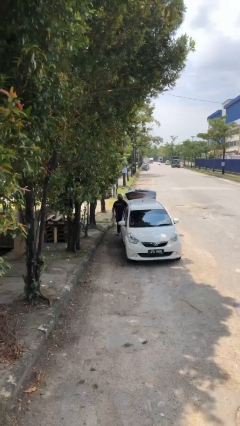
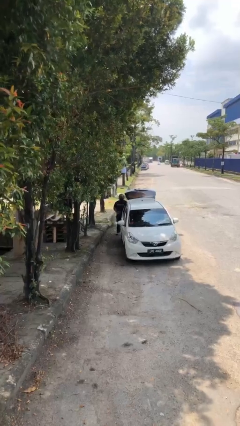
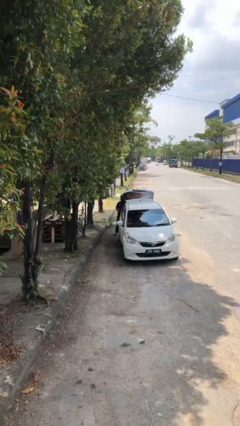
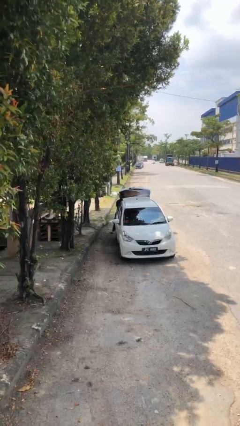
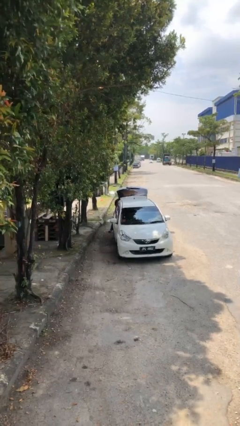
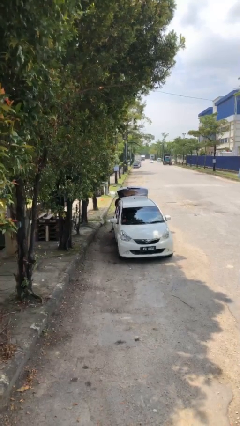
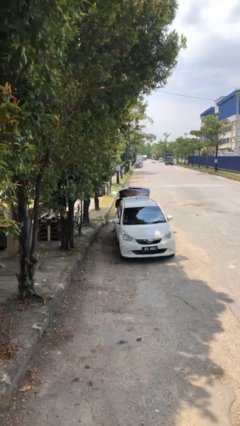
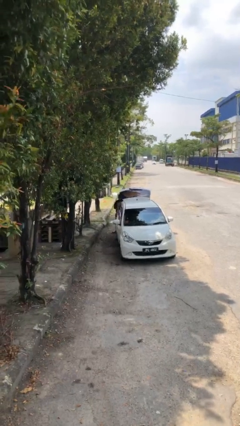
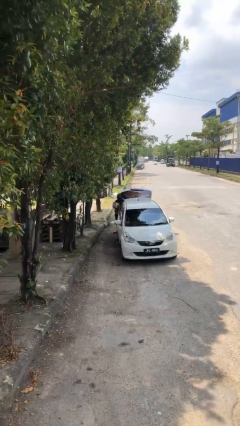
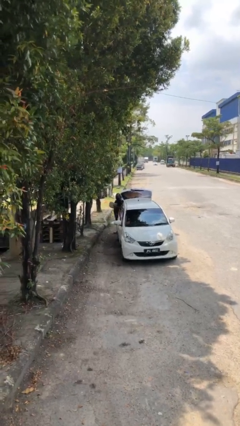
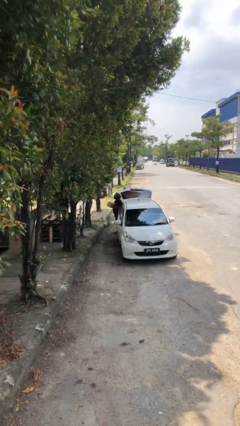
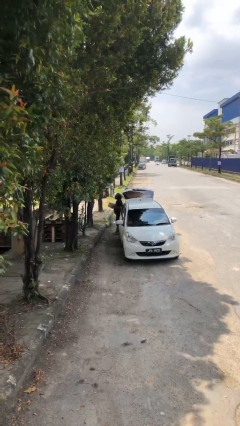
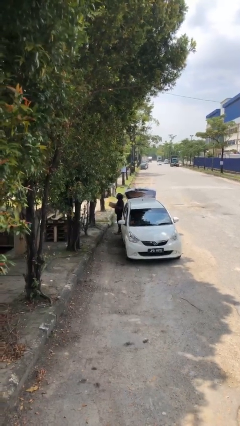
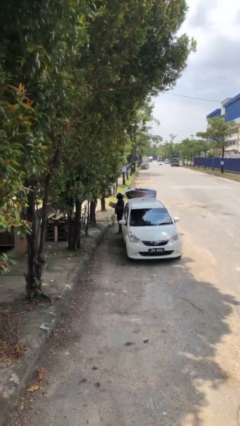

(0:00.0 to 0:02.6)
person unloads car

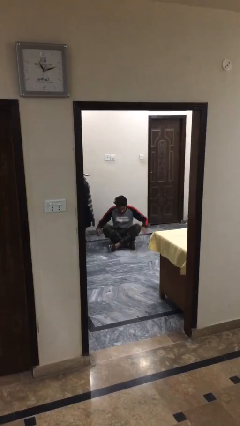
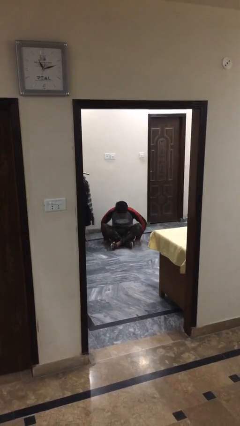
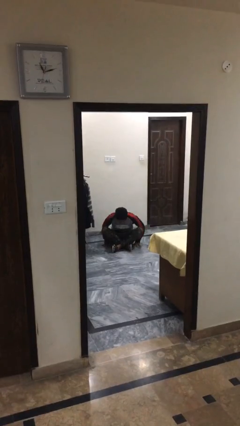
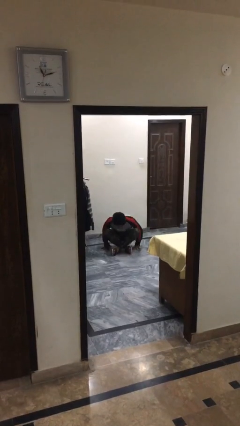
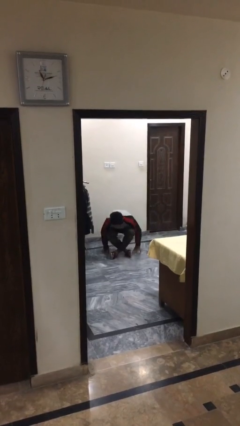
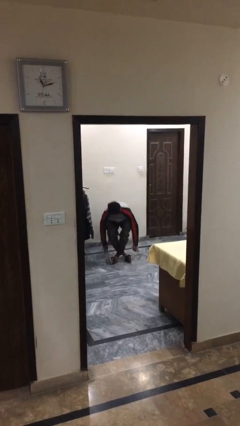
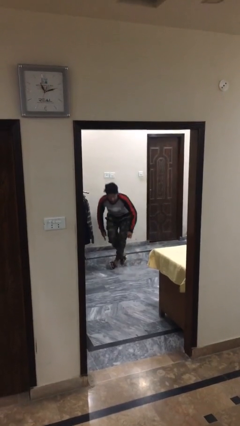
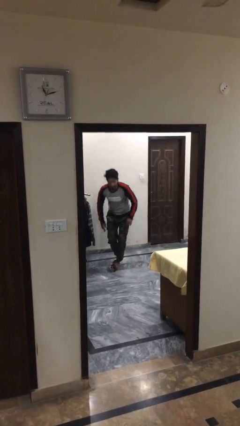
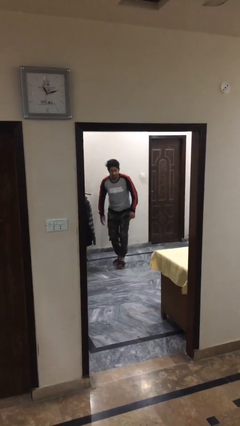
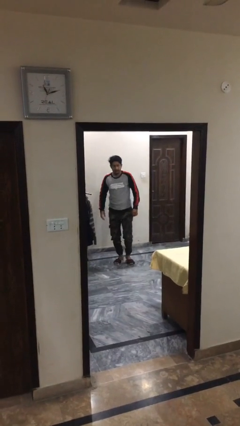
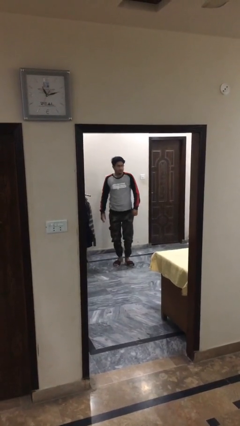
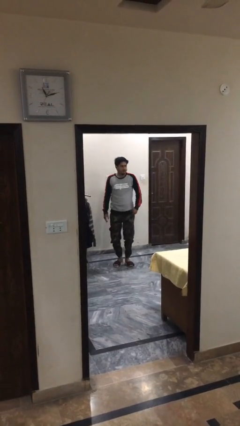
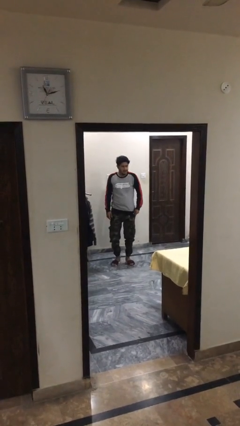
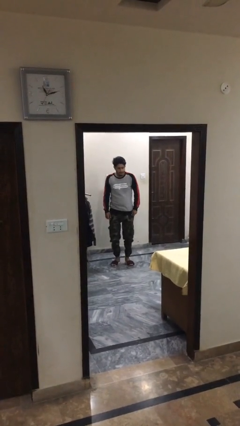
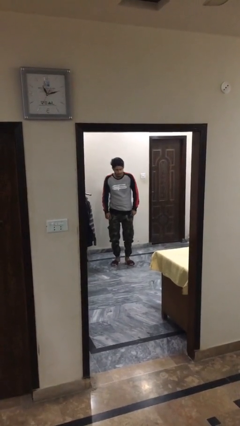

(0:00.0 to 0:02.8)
person stands up

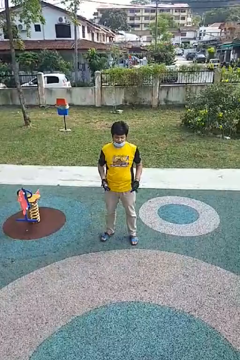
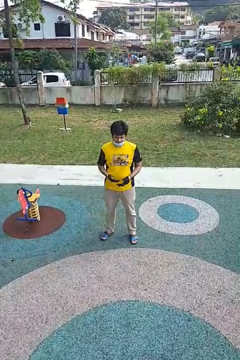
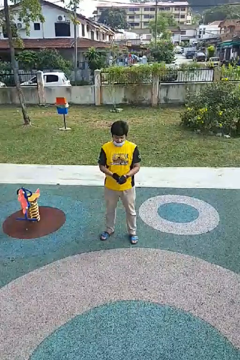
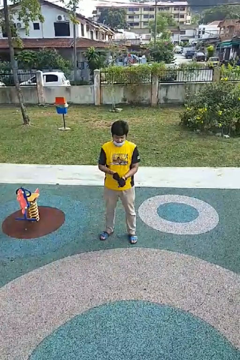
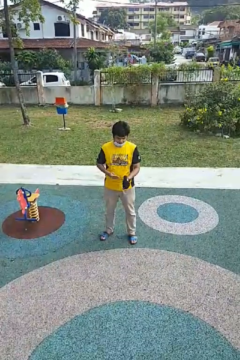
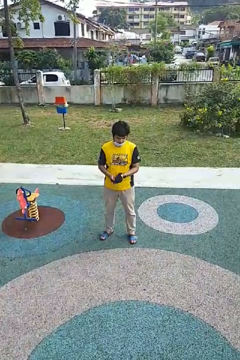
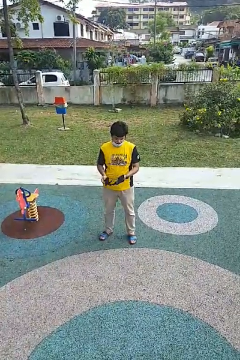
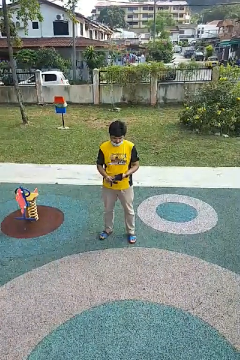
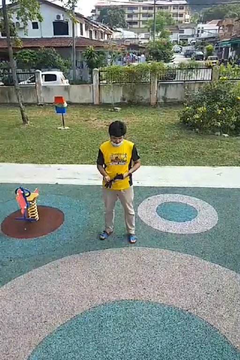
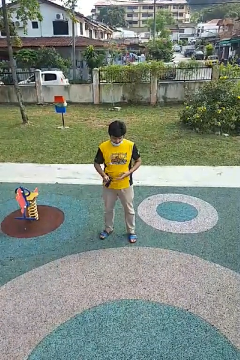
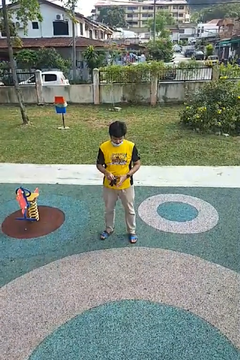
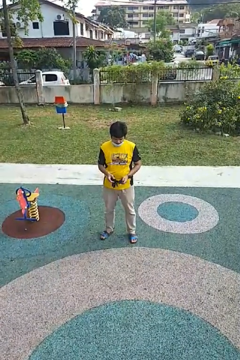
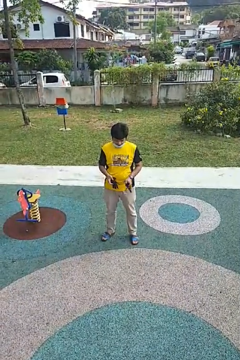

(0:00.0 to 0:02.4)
person takes off gloves

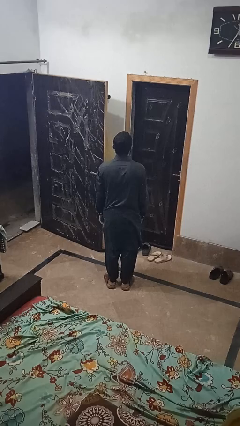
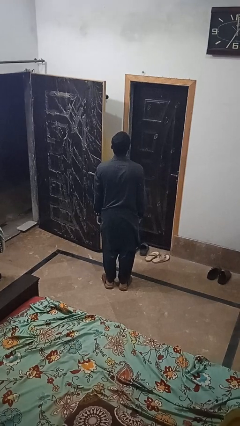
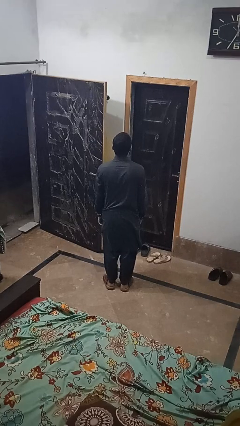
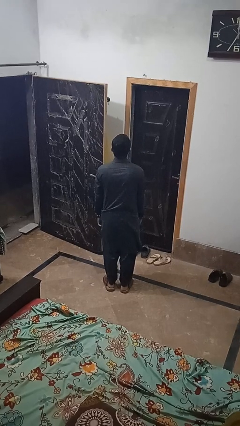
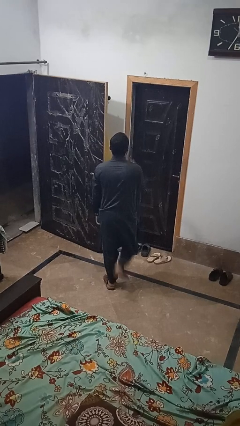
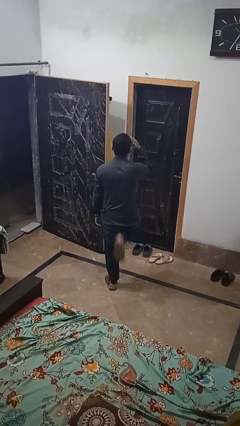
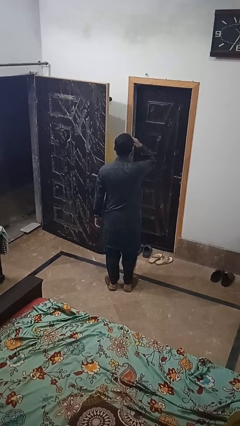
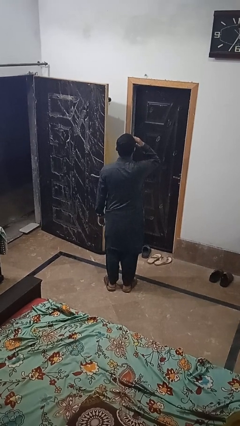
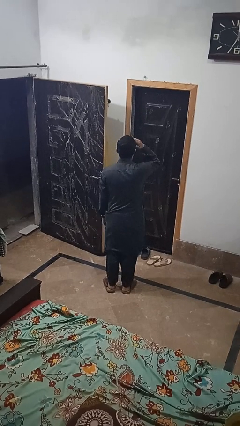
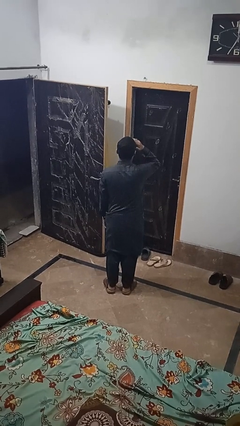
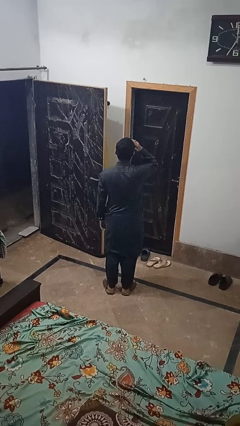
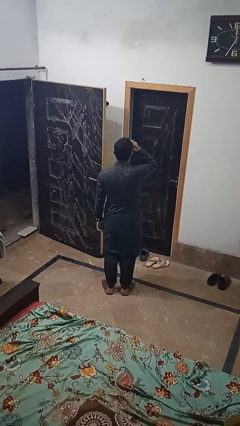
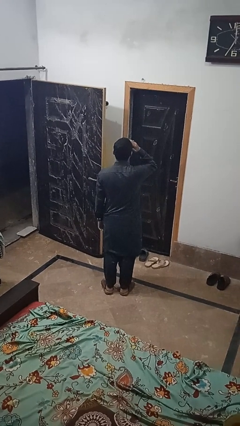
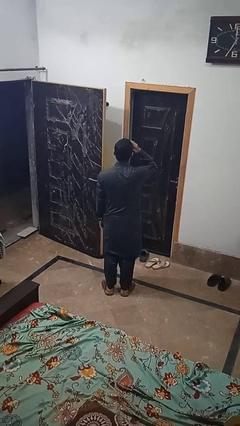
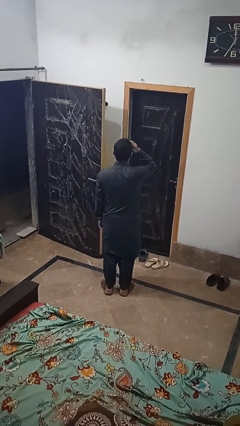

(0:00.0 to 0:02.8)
person salutes

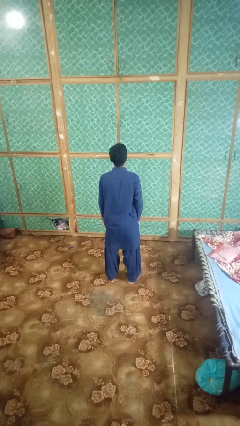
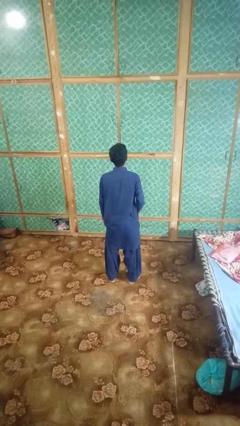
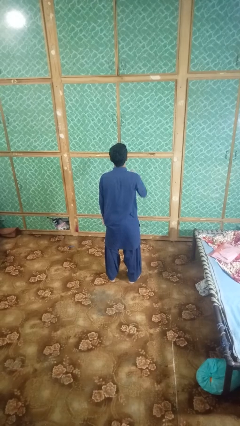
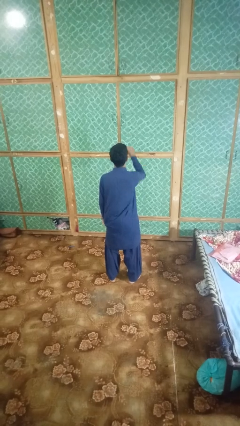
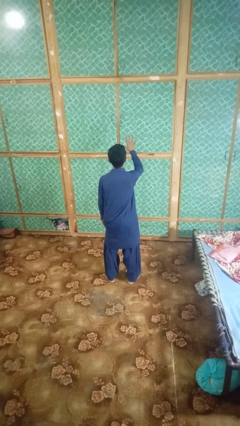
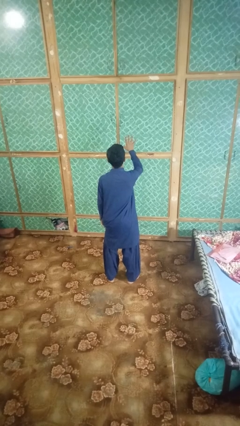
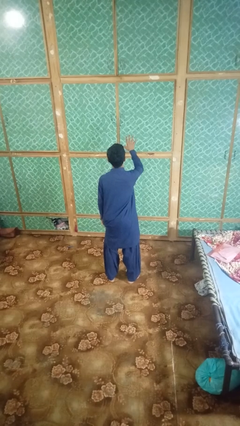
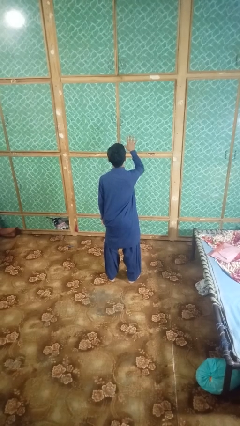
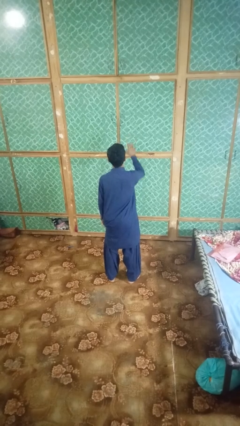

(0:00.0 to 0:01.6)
person gestures number five

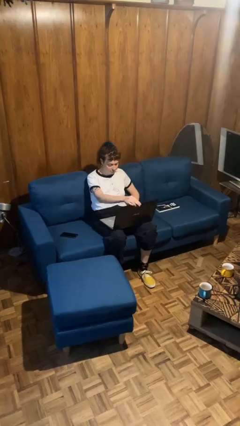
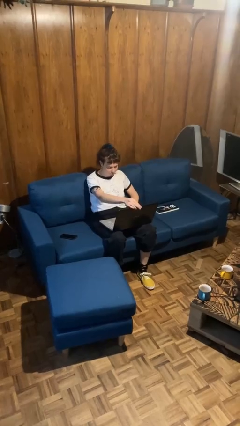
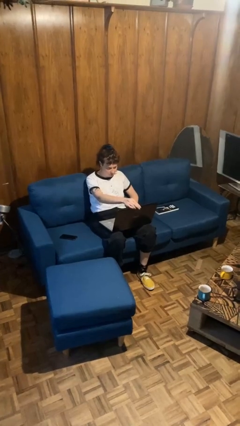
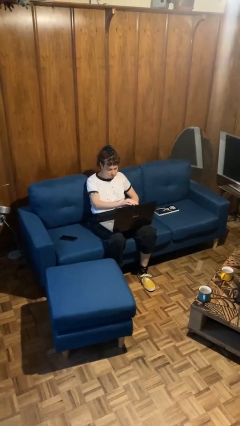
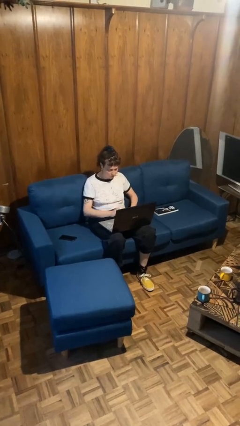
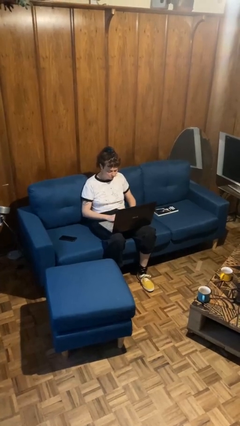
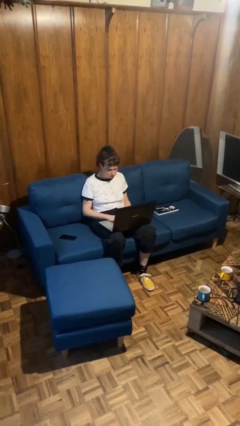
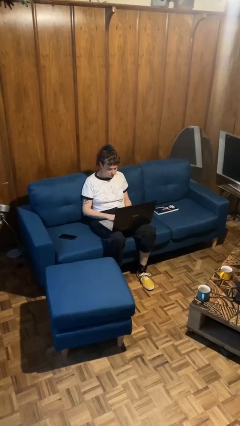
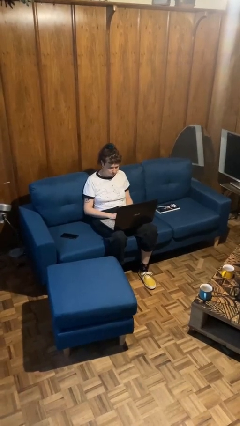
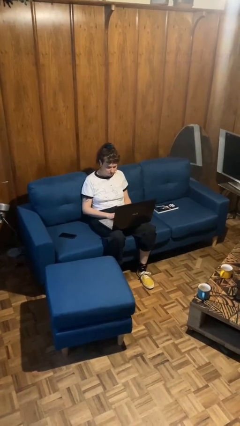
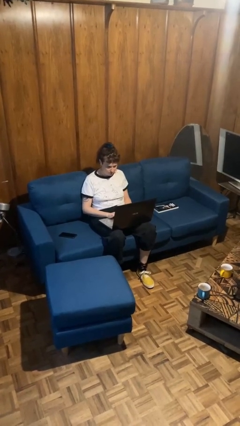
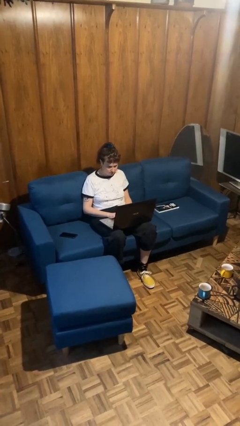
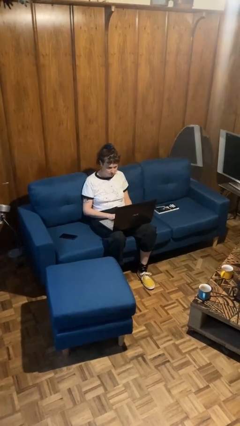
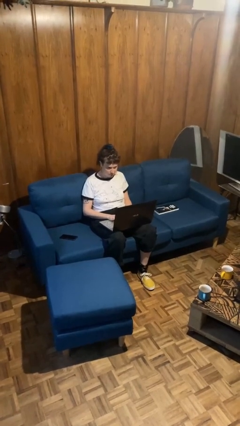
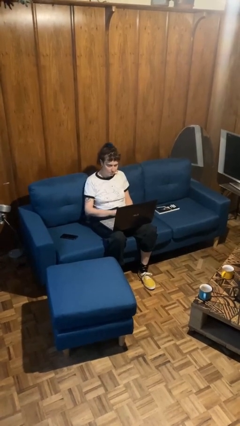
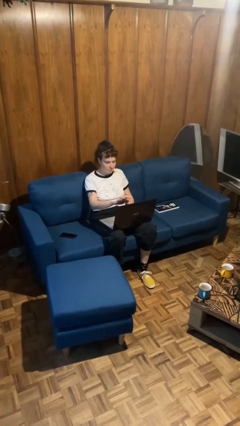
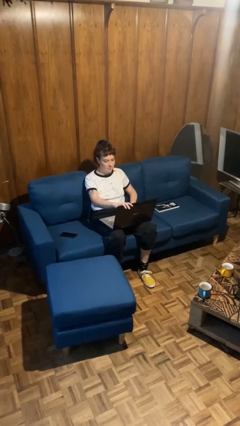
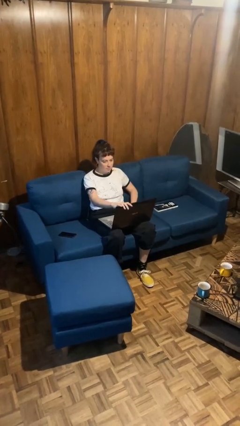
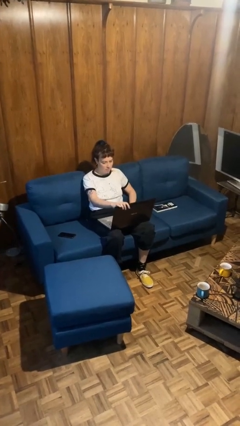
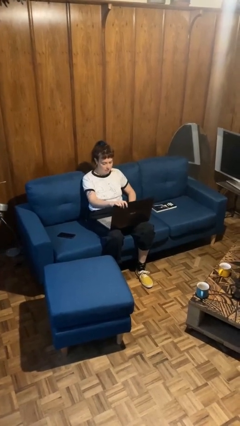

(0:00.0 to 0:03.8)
person interacts with laptop

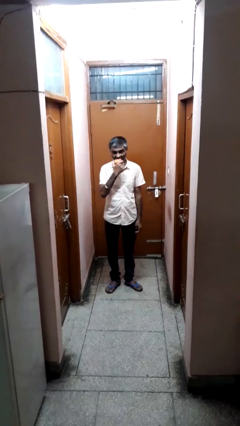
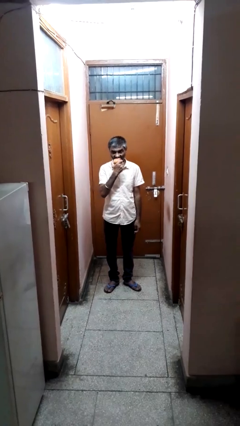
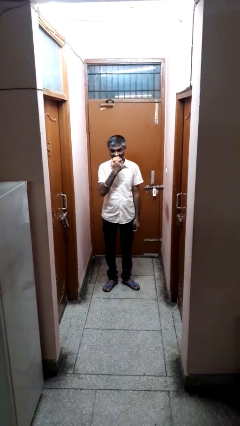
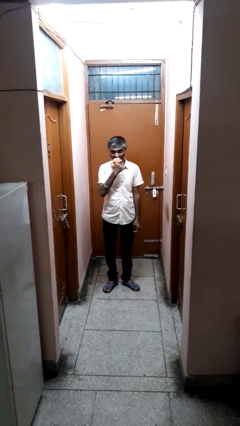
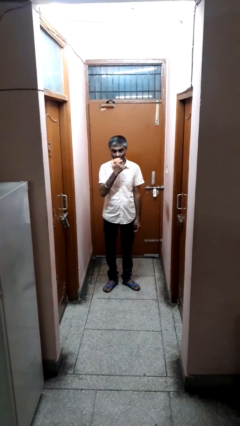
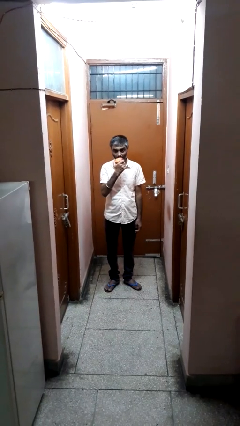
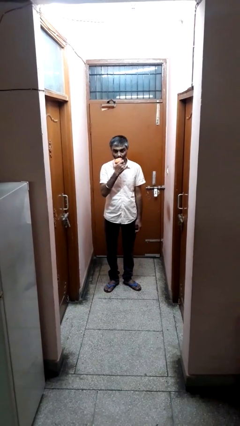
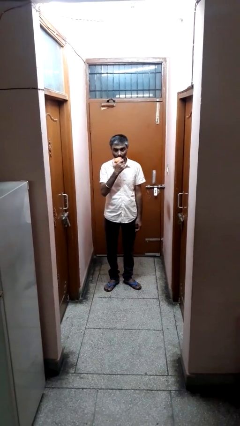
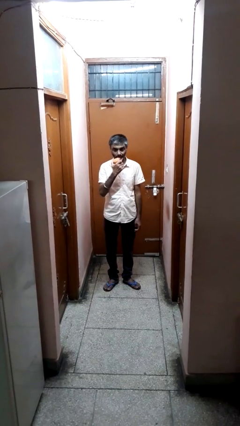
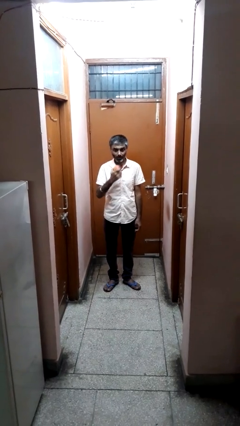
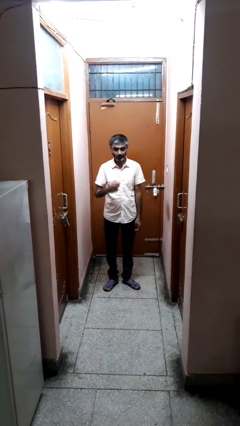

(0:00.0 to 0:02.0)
person eats apple
